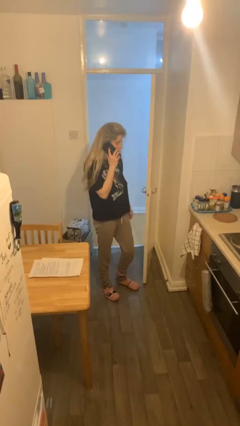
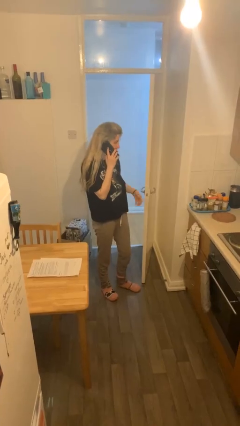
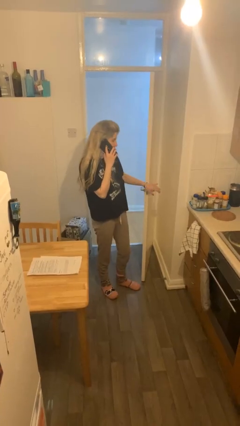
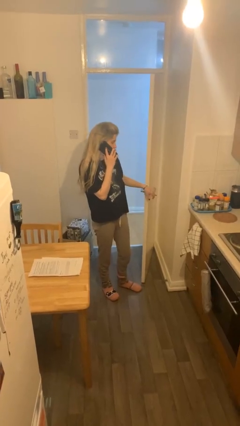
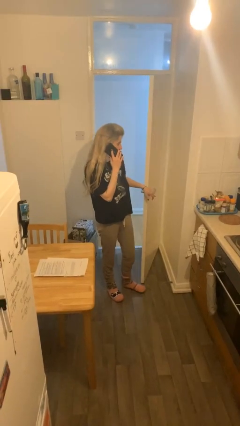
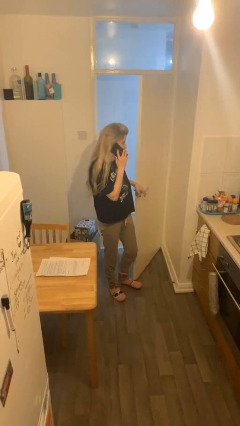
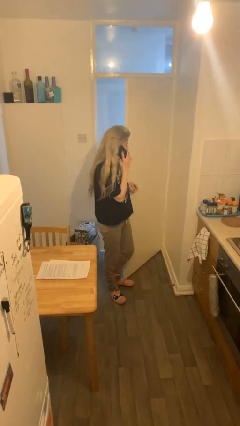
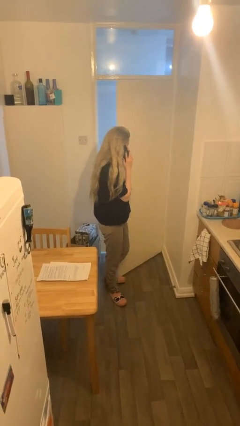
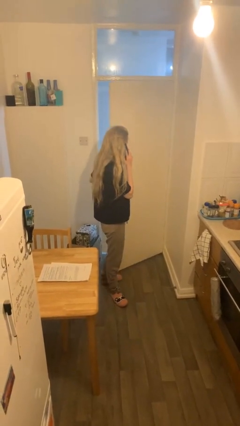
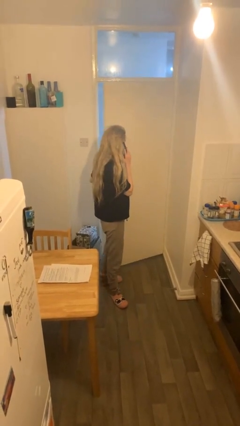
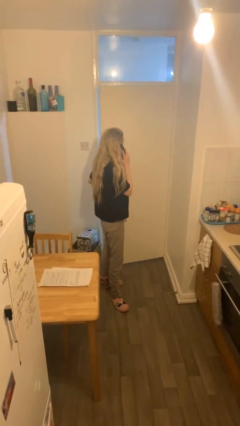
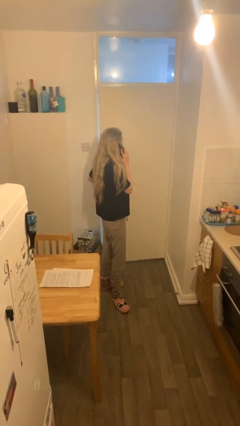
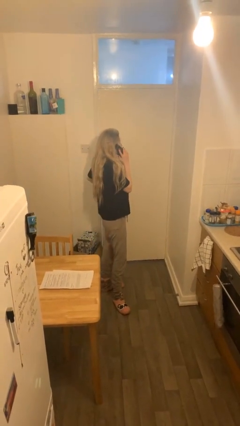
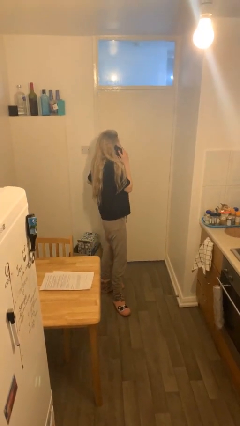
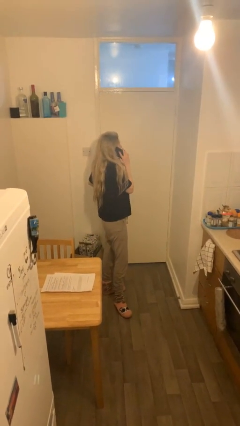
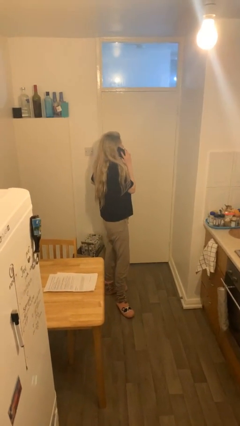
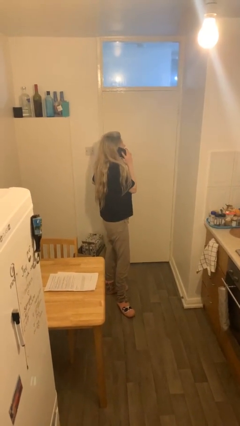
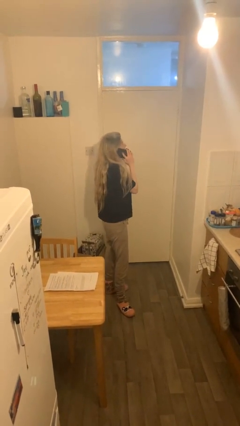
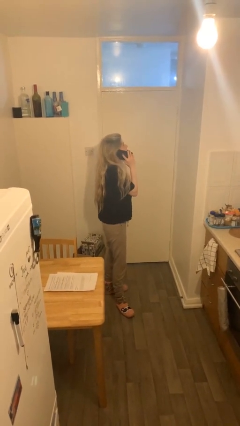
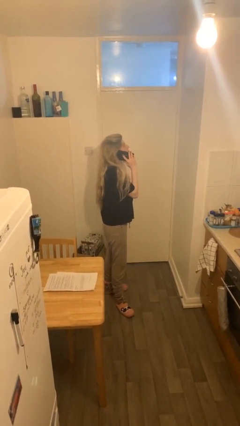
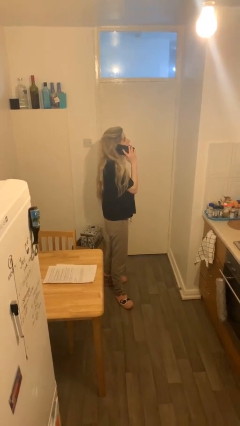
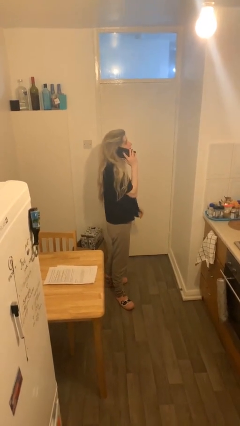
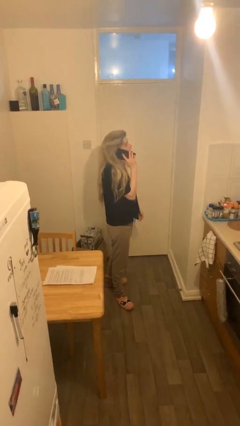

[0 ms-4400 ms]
person closes facility door

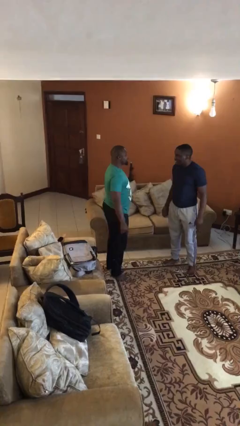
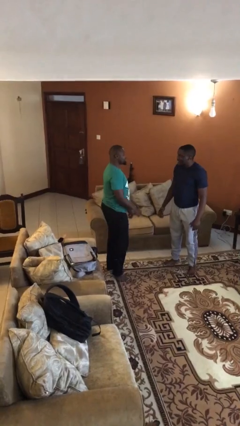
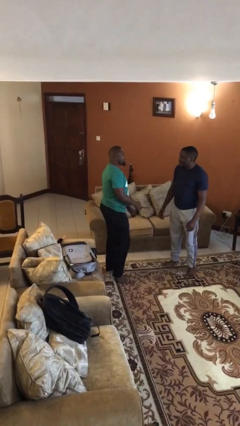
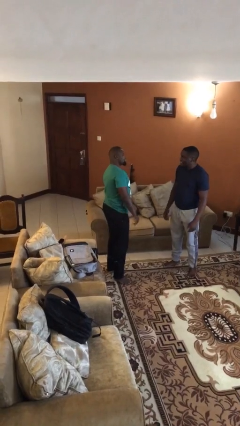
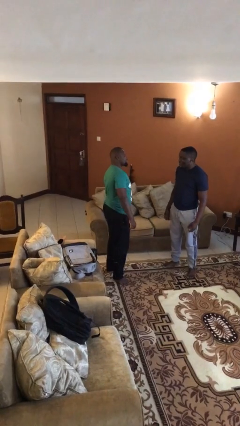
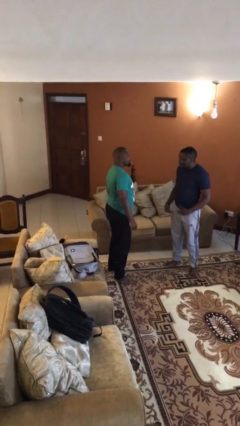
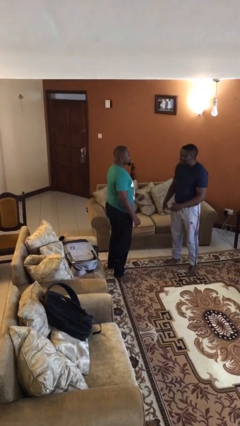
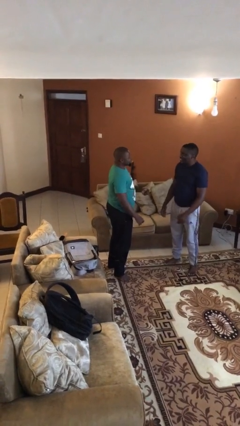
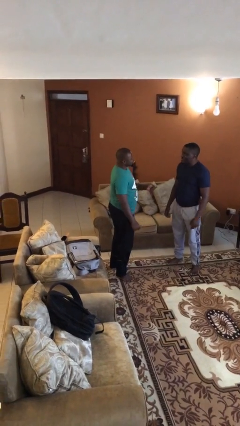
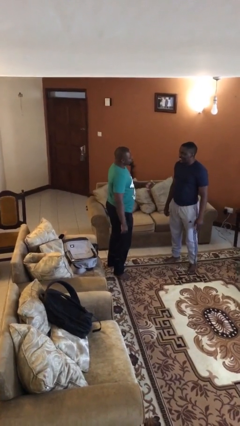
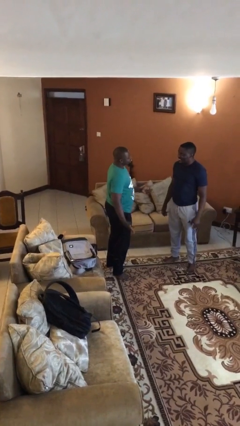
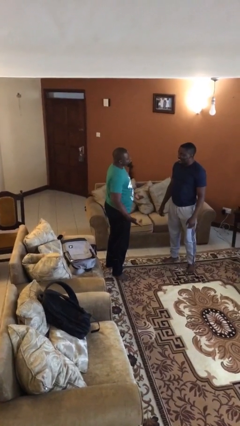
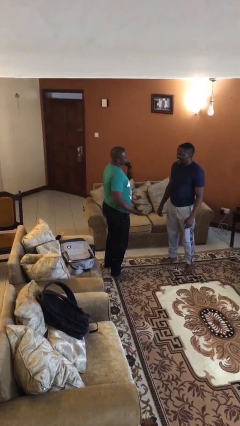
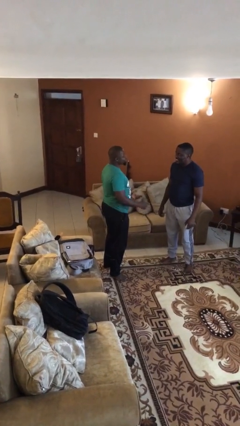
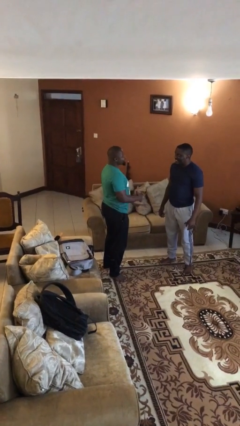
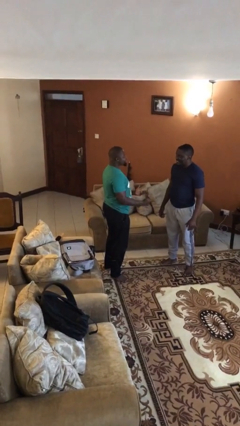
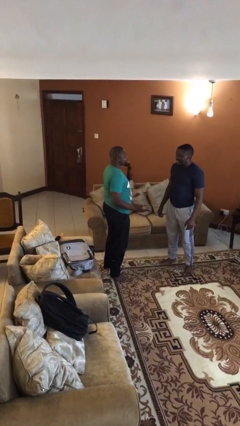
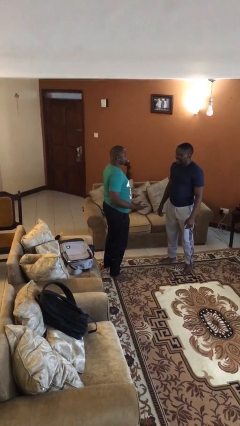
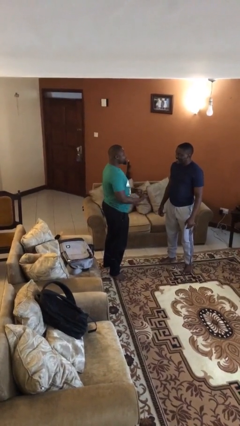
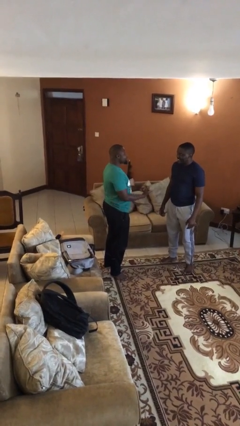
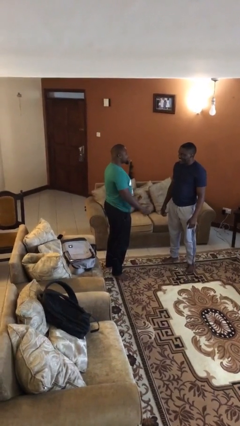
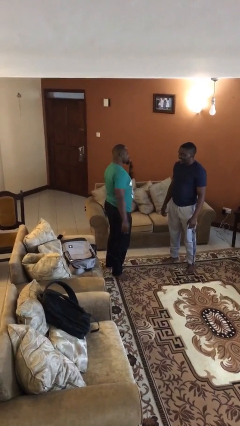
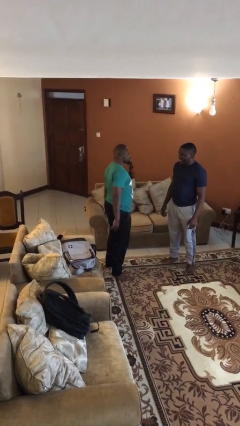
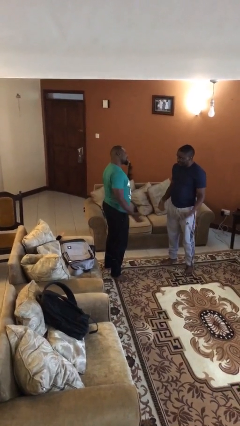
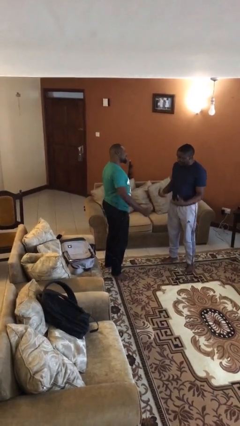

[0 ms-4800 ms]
person talks to person

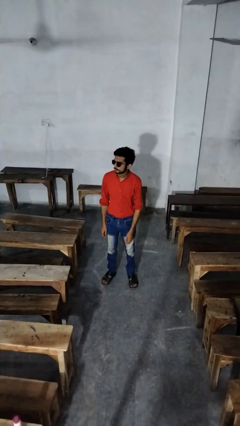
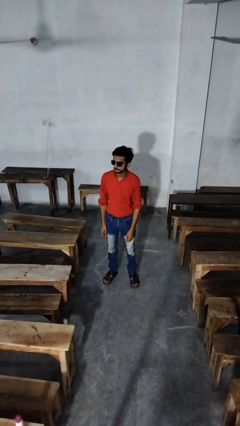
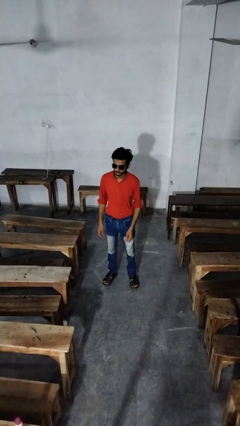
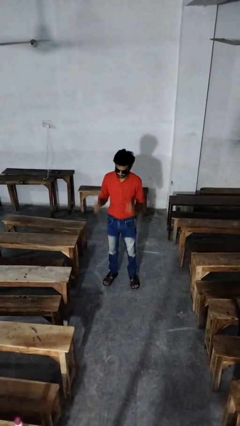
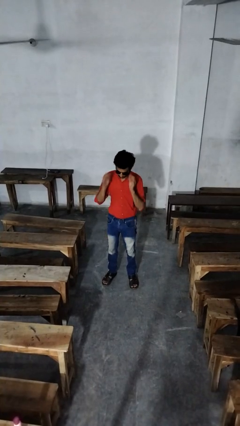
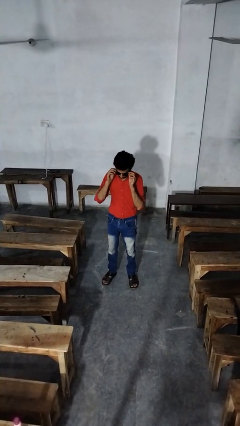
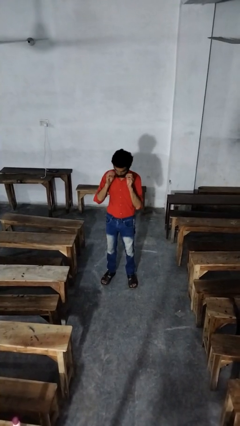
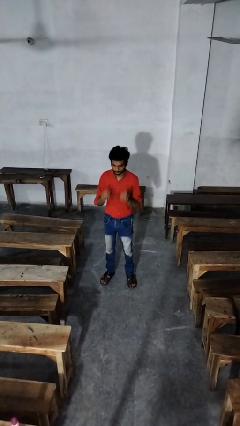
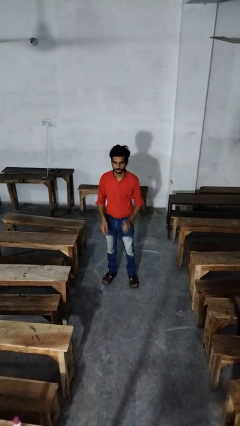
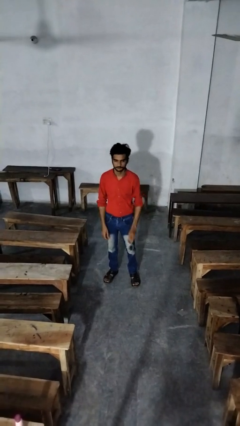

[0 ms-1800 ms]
person takes off sunglasses

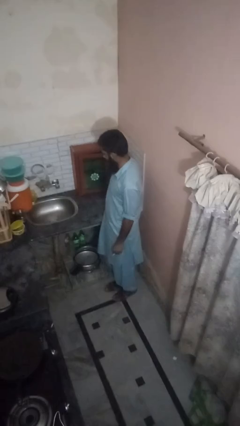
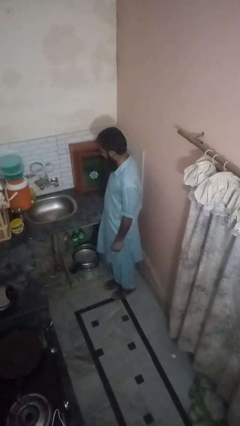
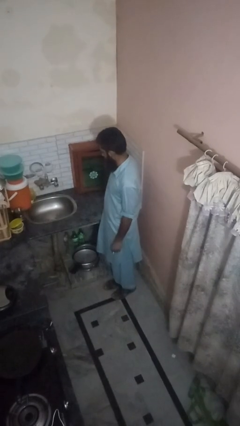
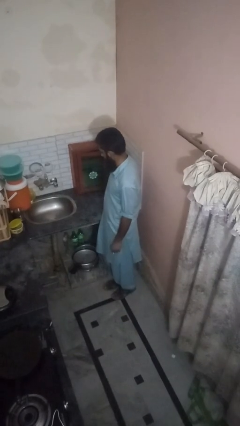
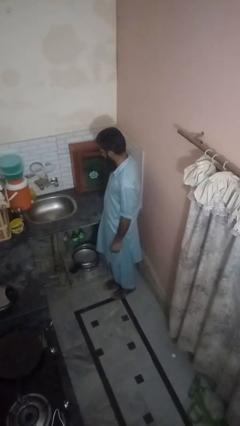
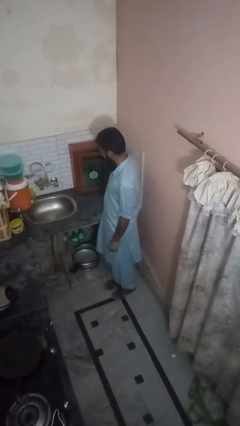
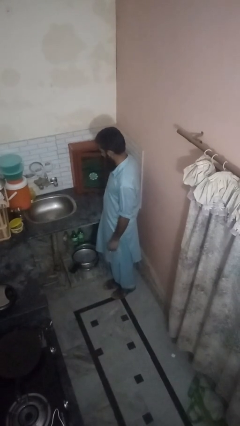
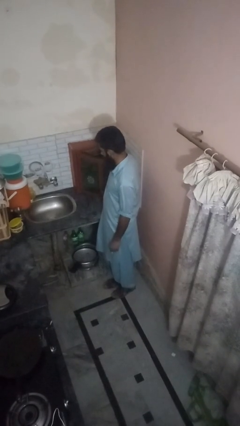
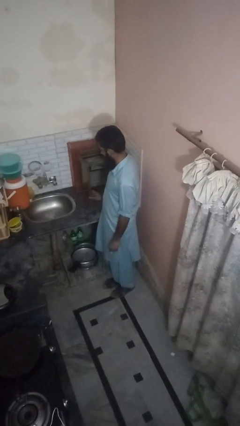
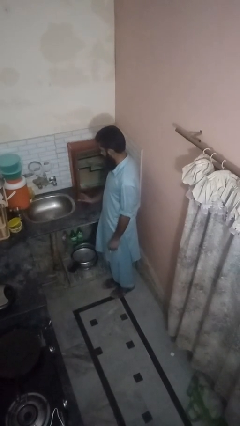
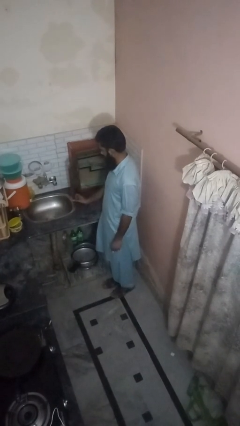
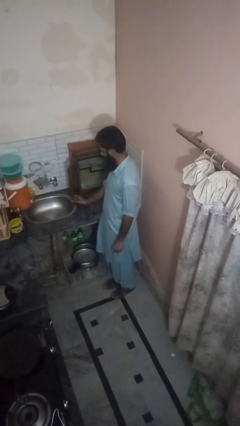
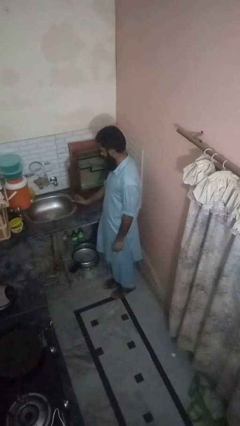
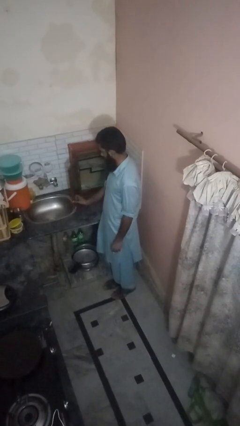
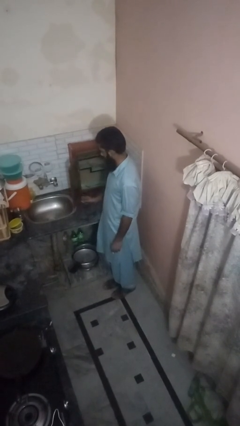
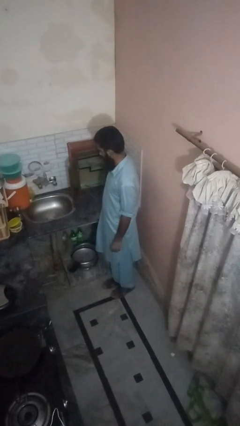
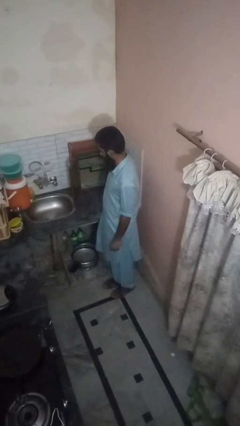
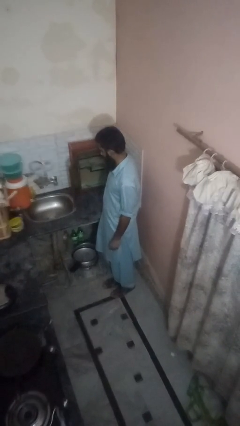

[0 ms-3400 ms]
person opens kitchen drawer

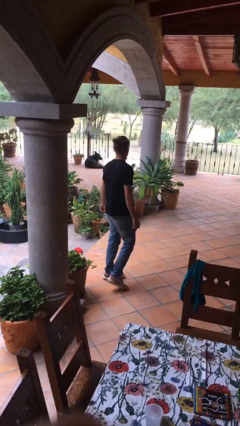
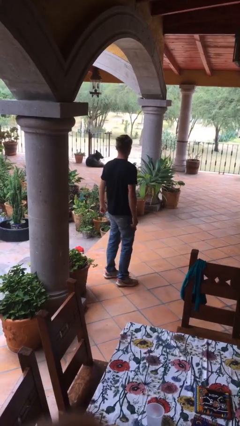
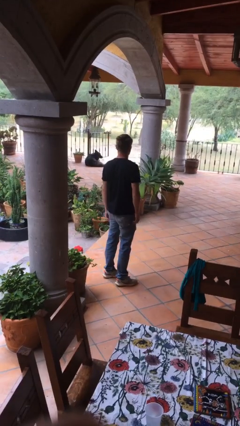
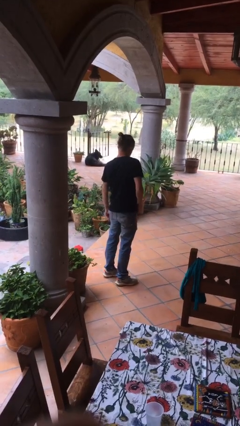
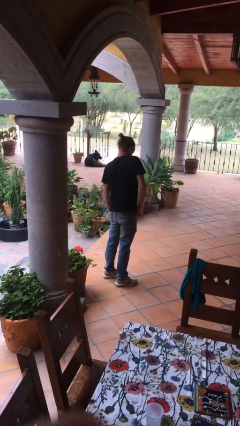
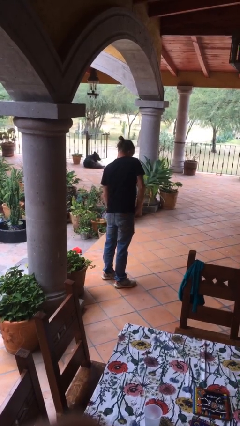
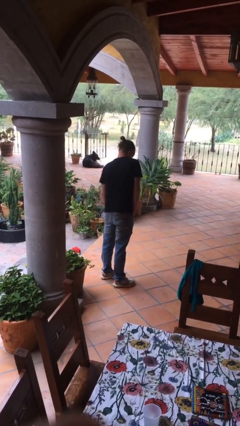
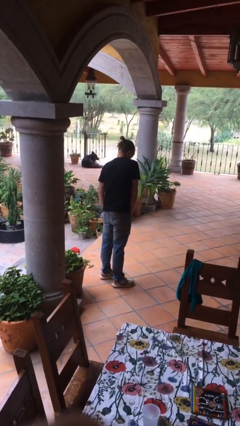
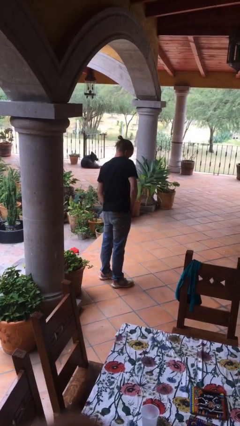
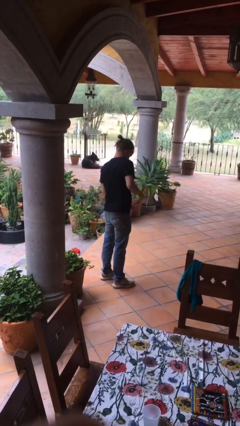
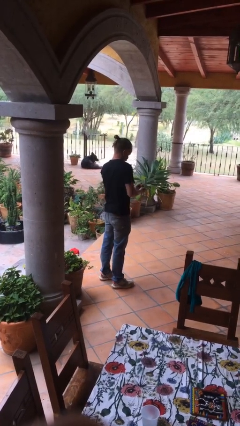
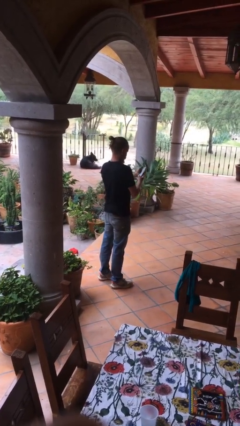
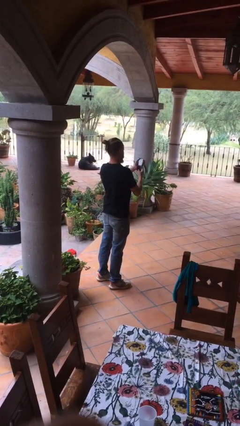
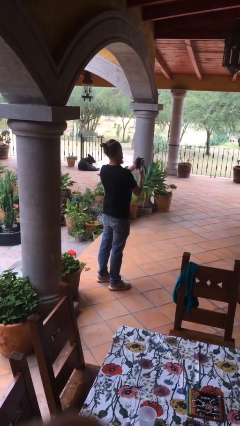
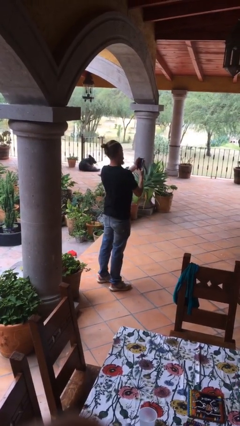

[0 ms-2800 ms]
person takes phone from pocket

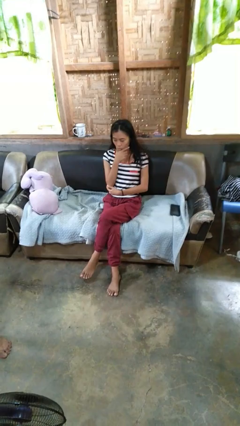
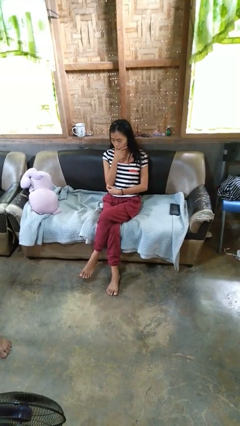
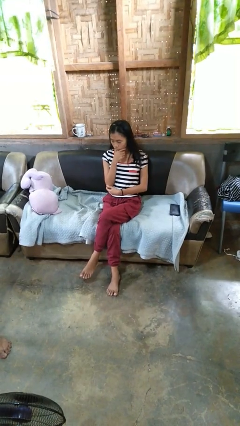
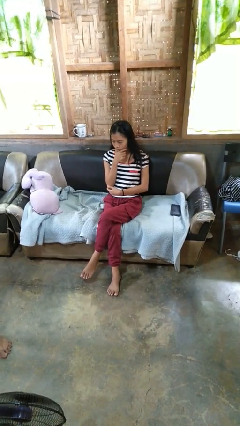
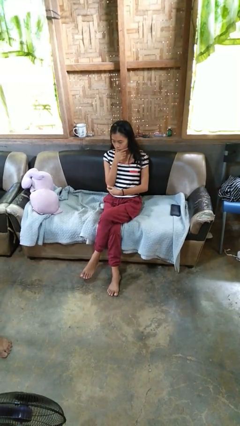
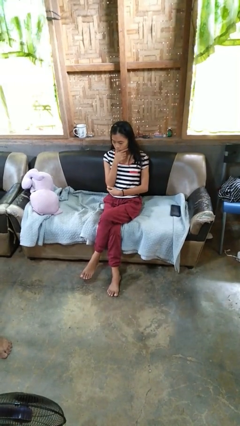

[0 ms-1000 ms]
person strokes chin
